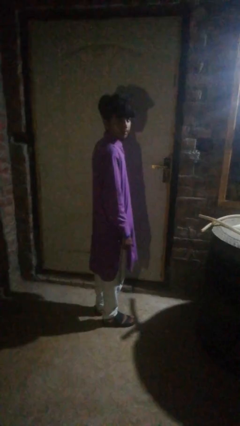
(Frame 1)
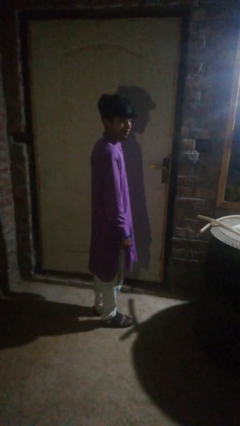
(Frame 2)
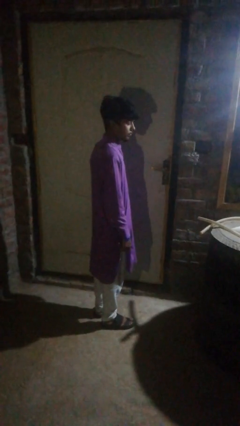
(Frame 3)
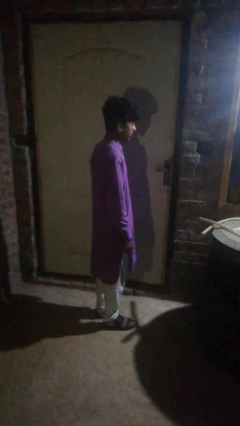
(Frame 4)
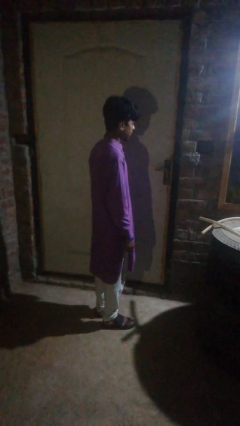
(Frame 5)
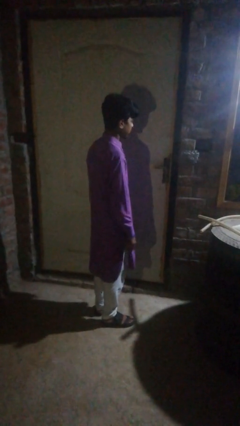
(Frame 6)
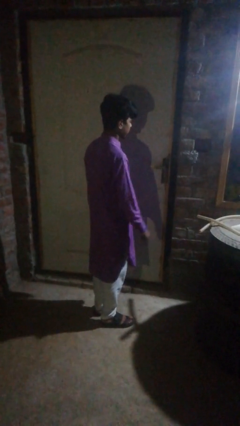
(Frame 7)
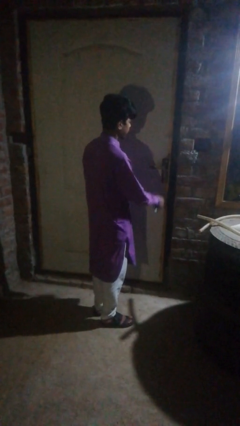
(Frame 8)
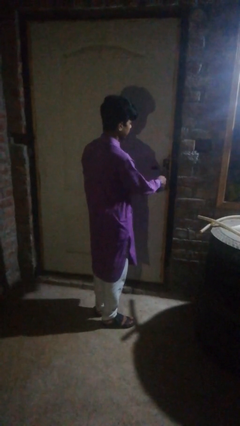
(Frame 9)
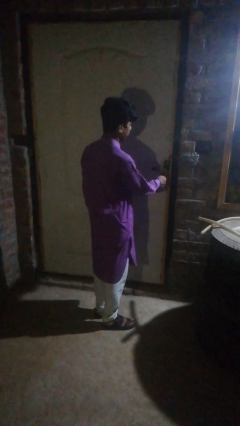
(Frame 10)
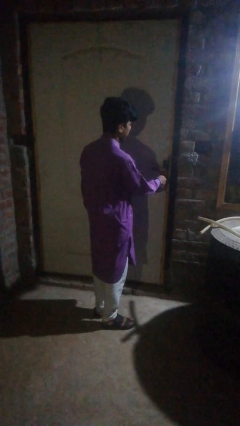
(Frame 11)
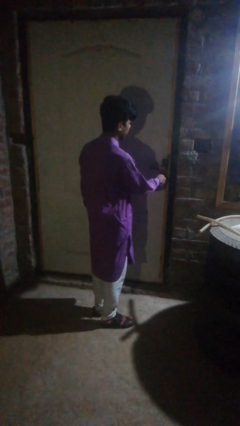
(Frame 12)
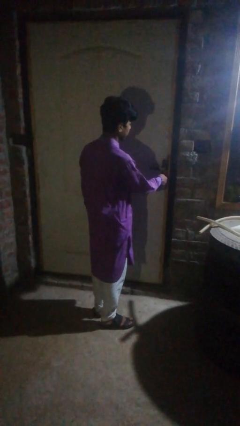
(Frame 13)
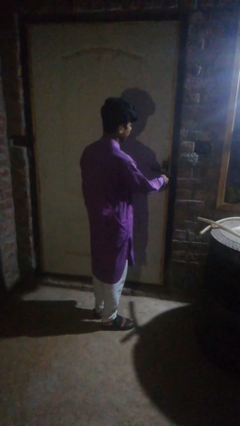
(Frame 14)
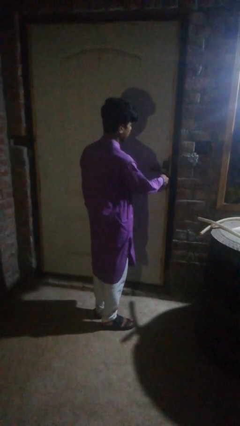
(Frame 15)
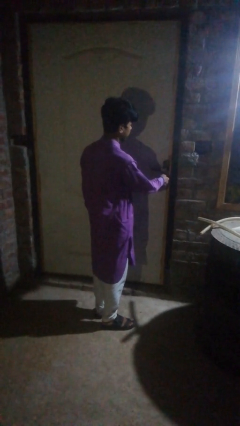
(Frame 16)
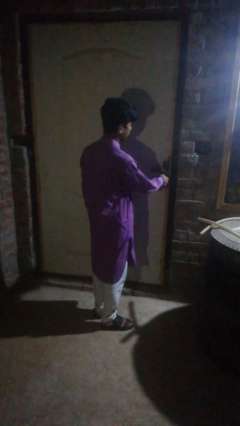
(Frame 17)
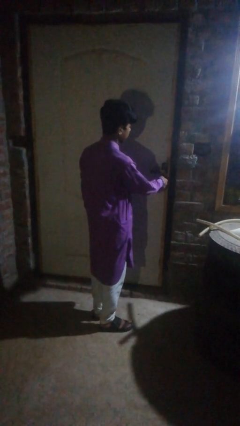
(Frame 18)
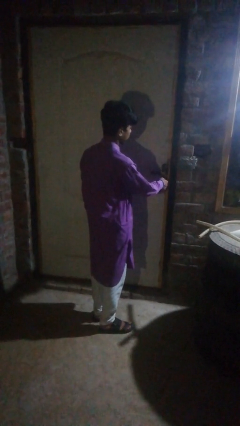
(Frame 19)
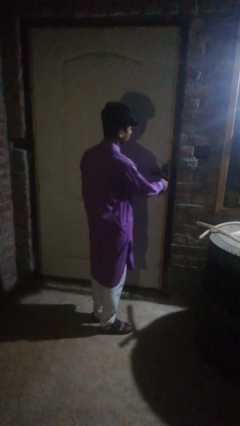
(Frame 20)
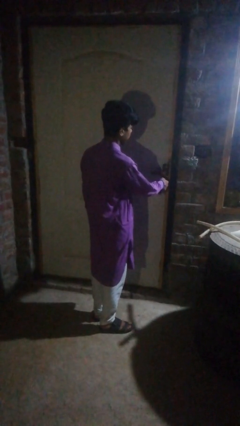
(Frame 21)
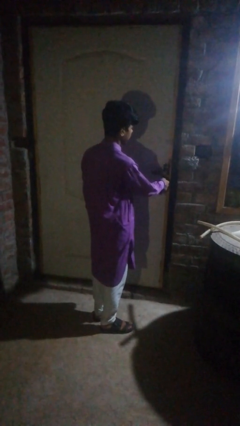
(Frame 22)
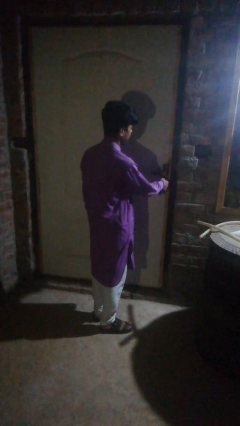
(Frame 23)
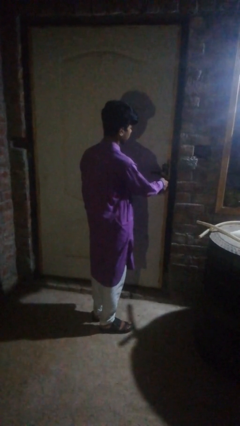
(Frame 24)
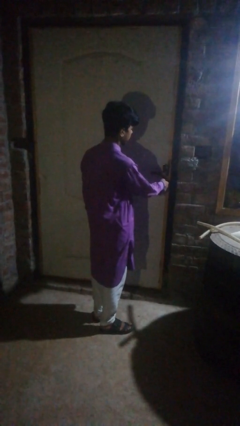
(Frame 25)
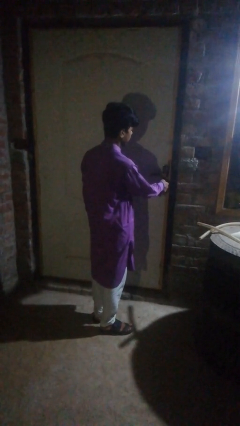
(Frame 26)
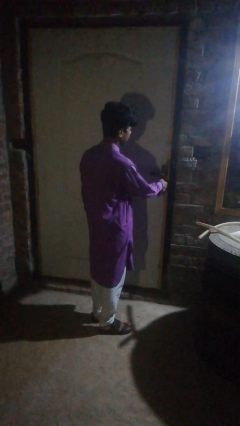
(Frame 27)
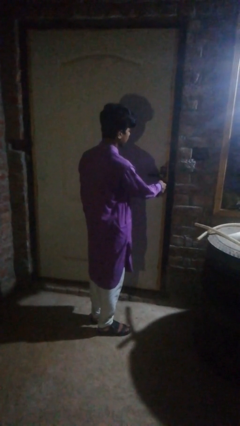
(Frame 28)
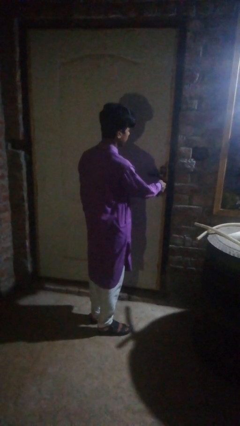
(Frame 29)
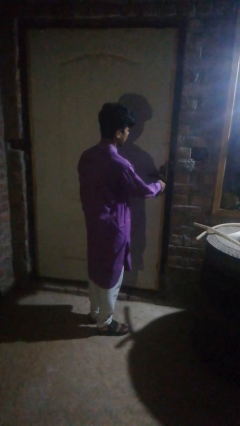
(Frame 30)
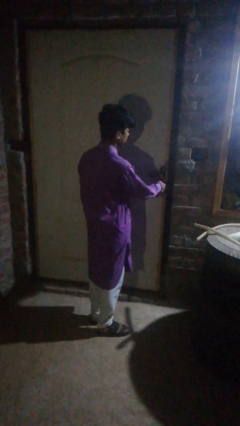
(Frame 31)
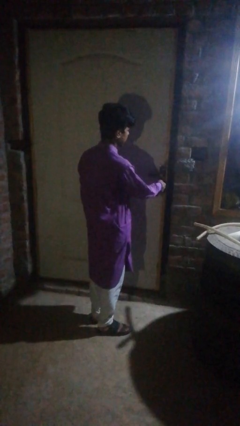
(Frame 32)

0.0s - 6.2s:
person unlocks door with keys

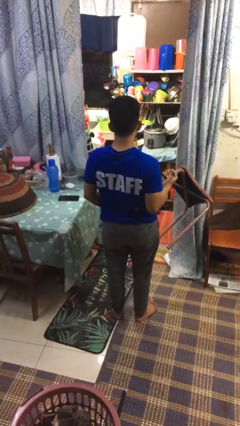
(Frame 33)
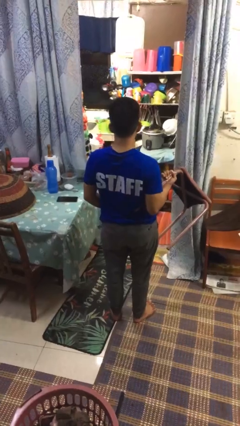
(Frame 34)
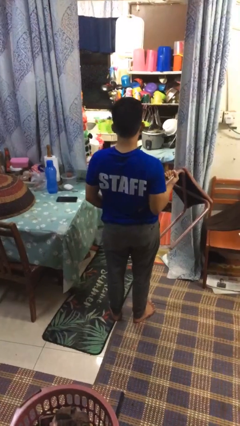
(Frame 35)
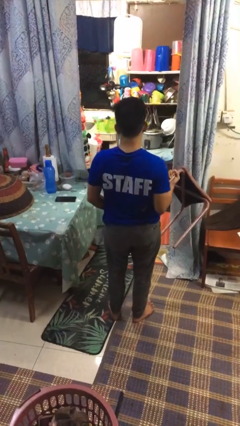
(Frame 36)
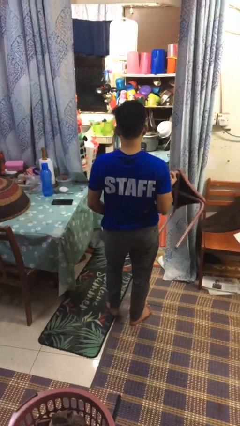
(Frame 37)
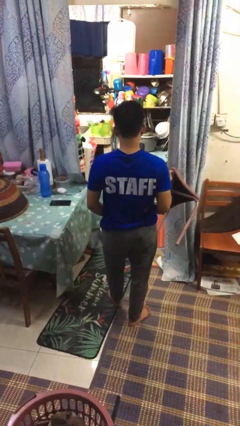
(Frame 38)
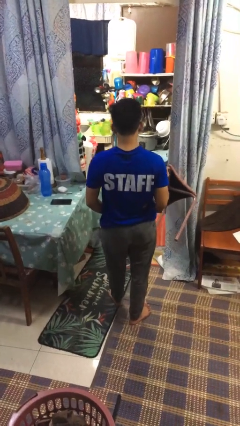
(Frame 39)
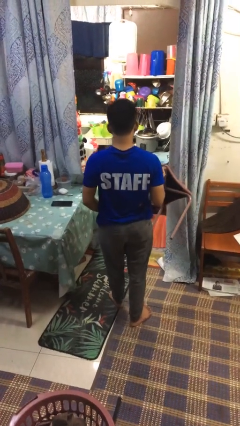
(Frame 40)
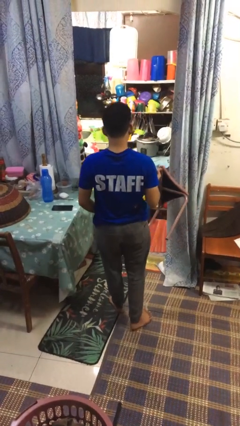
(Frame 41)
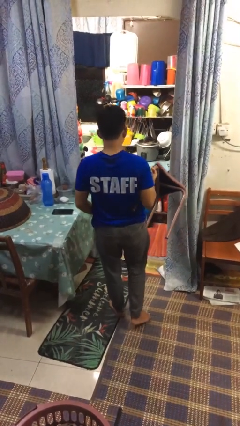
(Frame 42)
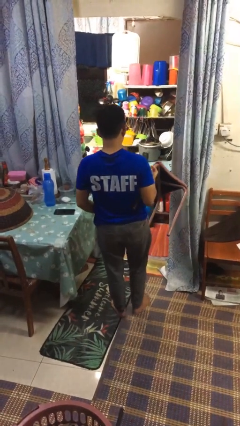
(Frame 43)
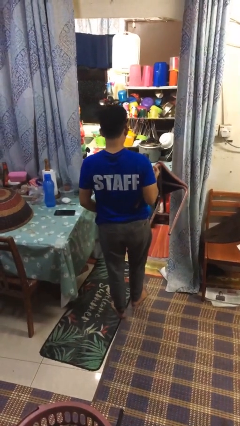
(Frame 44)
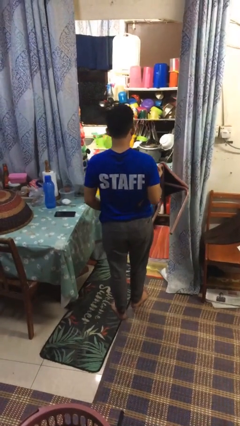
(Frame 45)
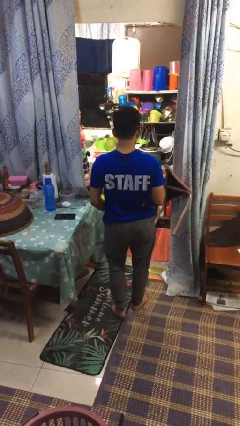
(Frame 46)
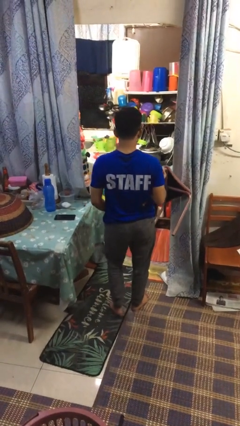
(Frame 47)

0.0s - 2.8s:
person carries furniture

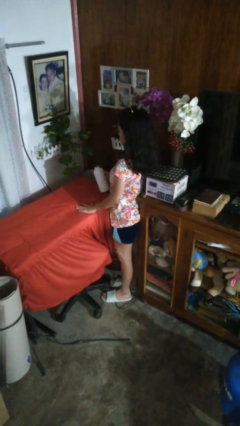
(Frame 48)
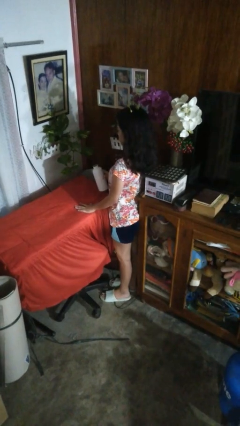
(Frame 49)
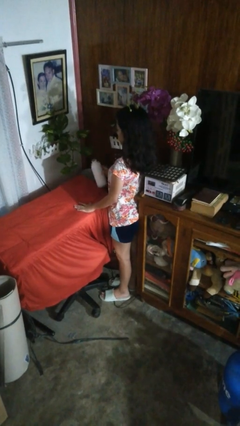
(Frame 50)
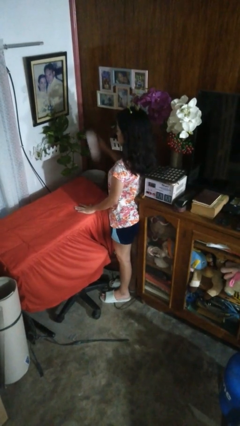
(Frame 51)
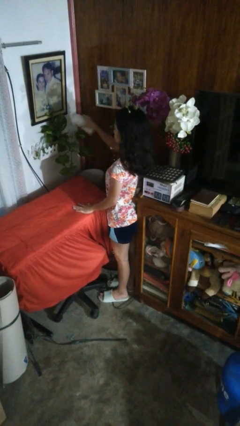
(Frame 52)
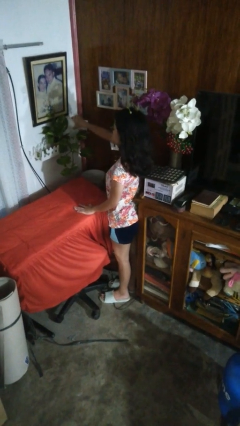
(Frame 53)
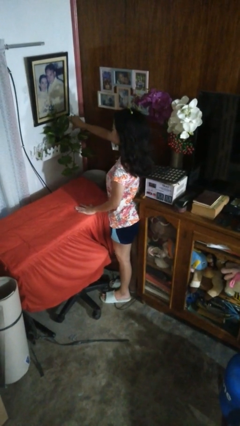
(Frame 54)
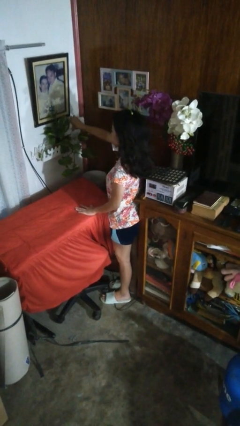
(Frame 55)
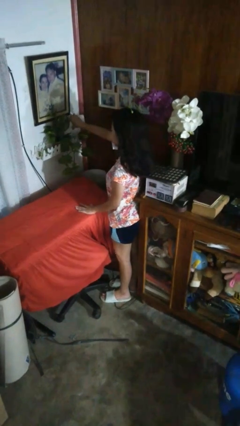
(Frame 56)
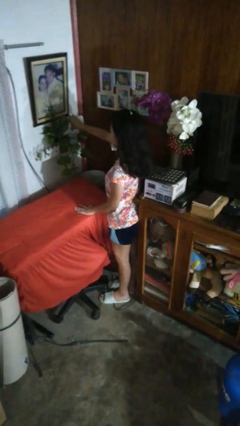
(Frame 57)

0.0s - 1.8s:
person waters houseplant

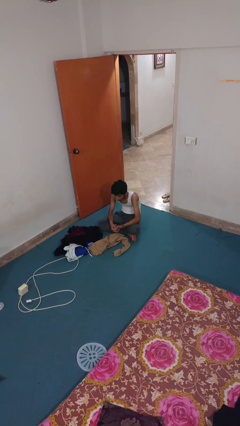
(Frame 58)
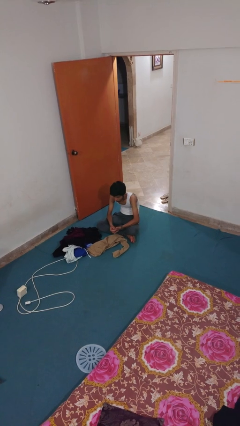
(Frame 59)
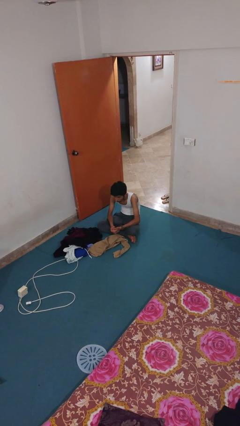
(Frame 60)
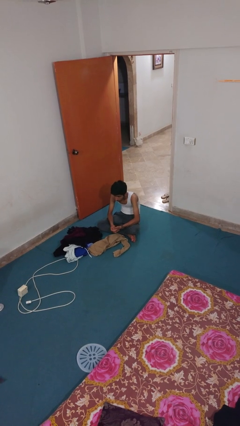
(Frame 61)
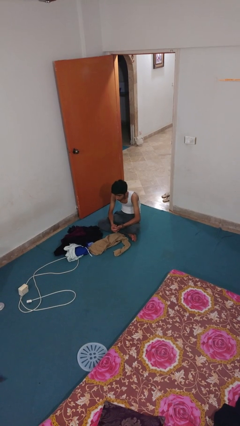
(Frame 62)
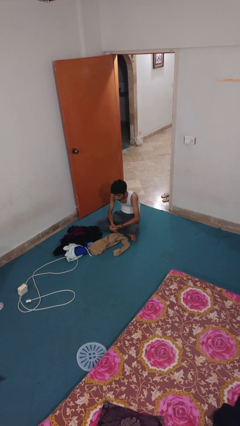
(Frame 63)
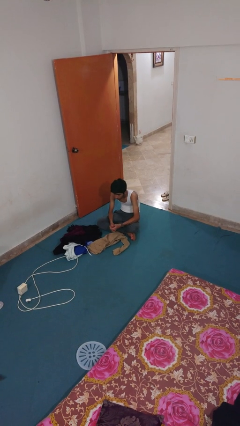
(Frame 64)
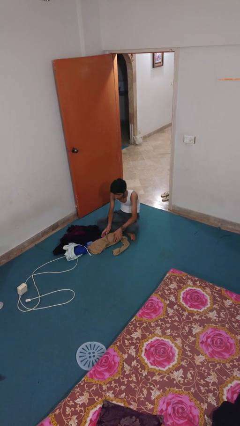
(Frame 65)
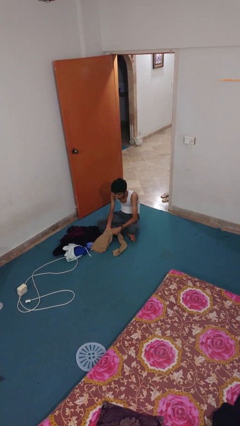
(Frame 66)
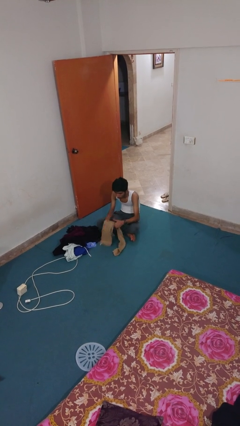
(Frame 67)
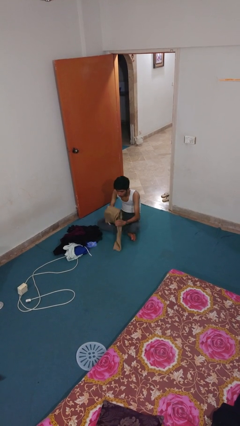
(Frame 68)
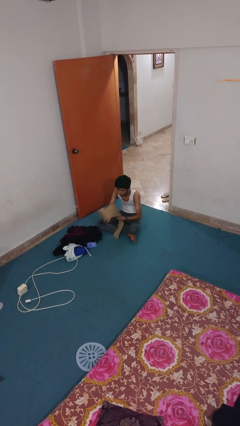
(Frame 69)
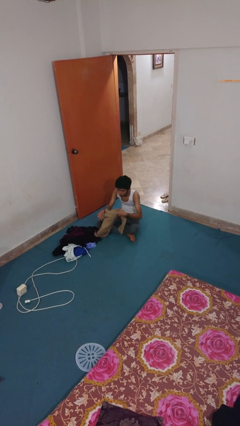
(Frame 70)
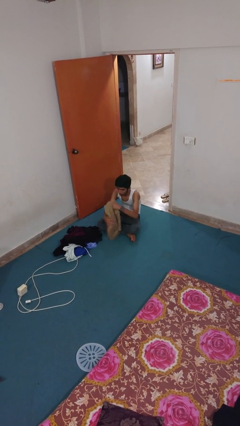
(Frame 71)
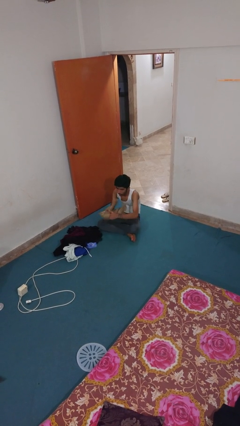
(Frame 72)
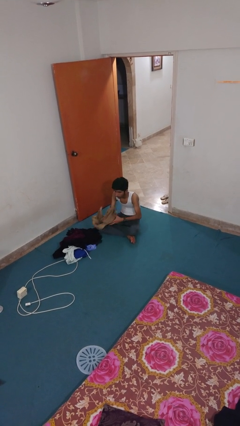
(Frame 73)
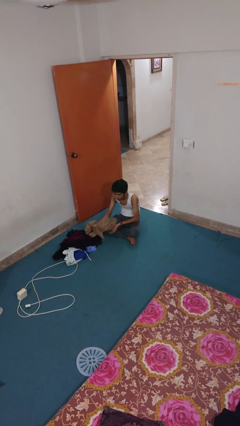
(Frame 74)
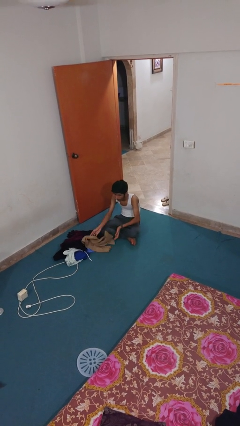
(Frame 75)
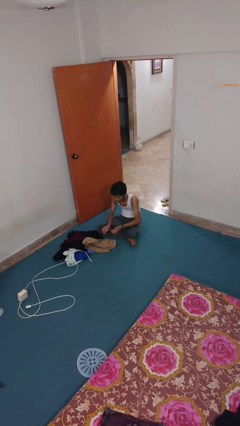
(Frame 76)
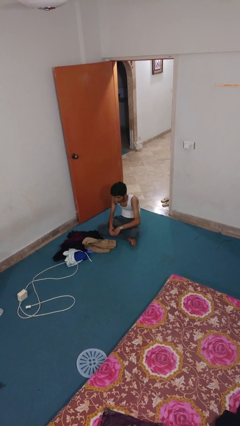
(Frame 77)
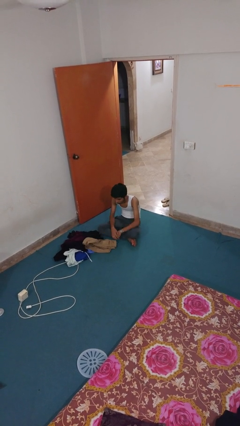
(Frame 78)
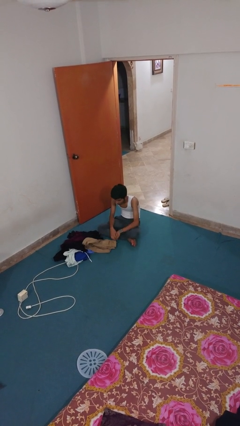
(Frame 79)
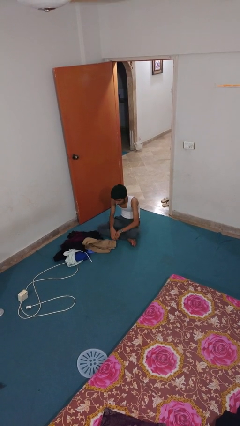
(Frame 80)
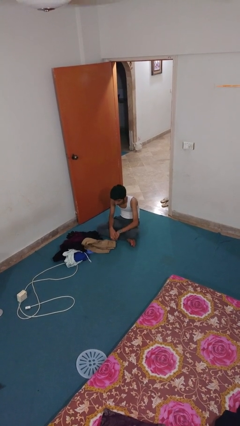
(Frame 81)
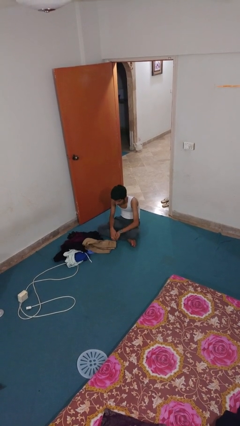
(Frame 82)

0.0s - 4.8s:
person folds pants

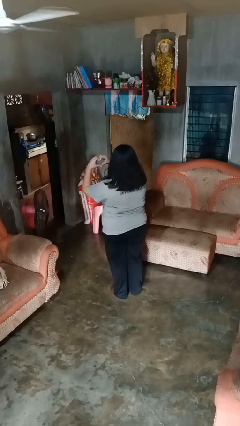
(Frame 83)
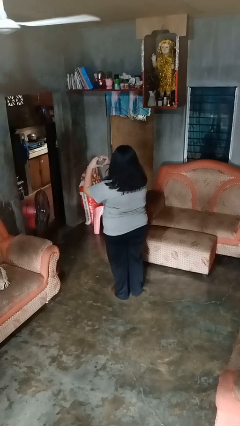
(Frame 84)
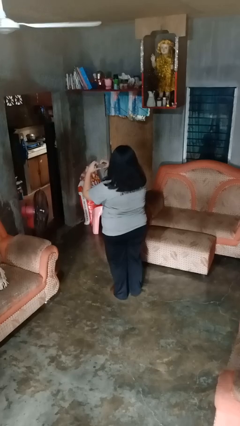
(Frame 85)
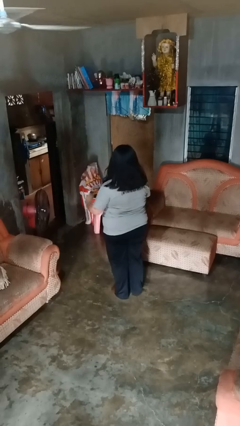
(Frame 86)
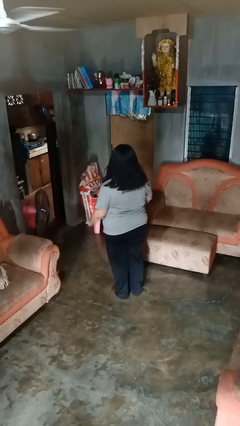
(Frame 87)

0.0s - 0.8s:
person gestures heart

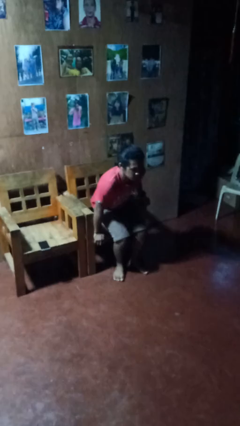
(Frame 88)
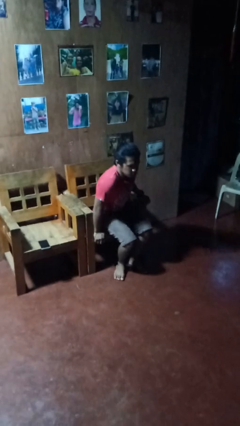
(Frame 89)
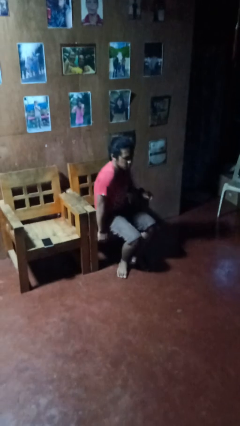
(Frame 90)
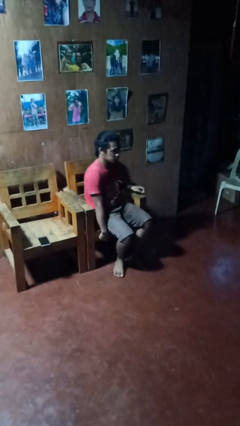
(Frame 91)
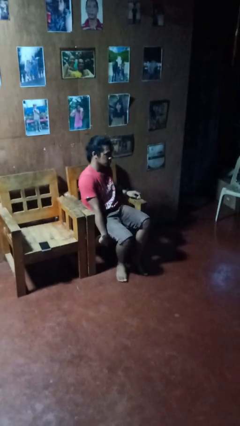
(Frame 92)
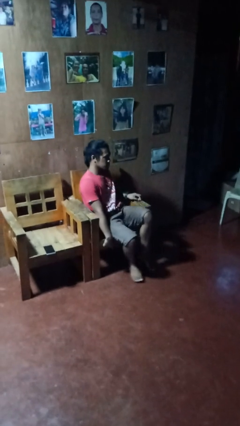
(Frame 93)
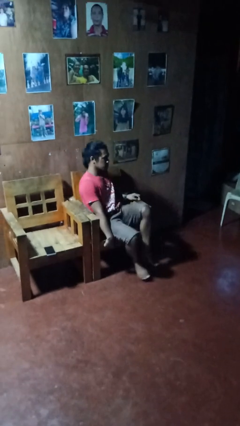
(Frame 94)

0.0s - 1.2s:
person sits down
